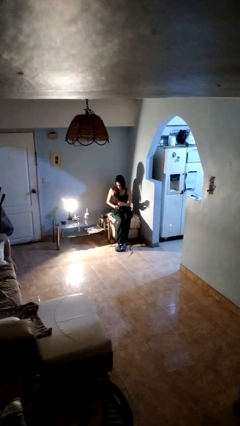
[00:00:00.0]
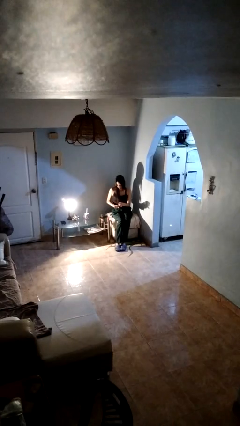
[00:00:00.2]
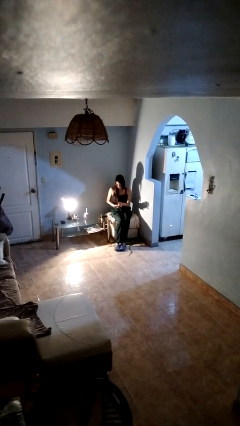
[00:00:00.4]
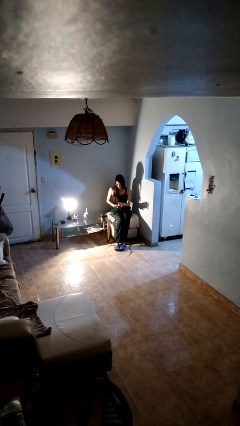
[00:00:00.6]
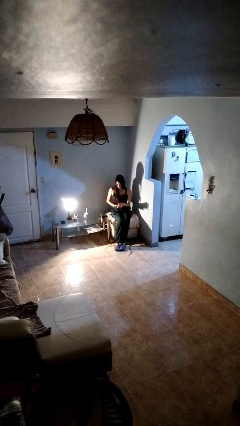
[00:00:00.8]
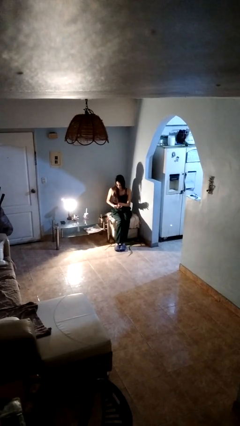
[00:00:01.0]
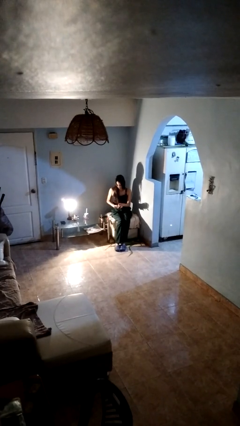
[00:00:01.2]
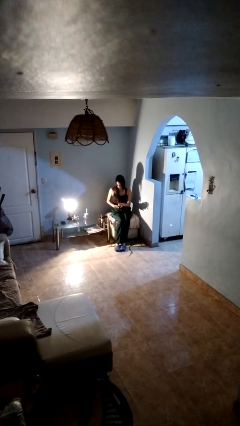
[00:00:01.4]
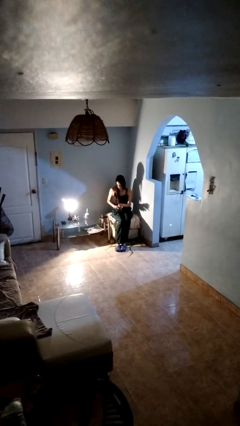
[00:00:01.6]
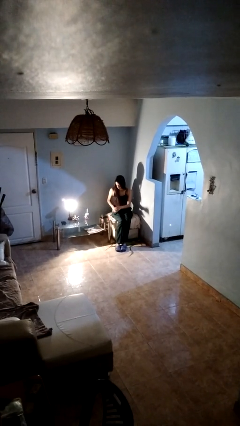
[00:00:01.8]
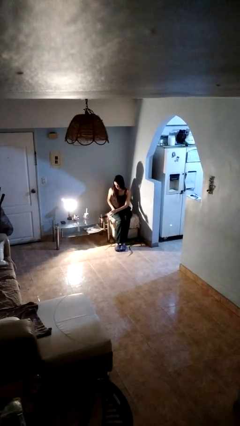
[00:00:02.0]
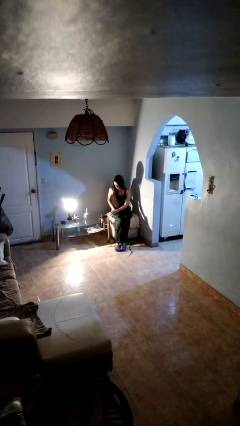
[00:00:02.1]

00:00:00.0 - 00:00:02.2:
person paints fingernails

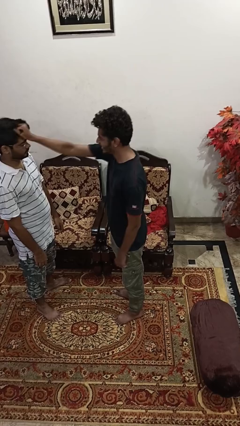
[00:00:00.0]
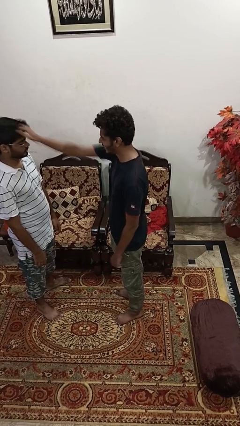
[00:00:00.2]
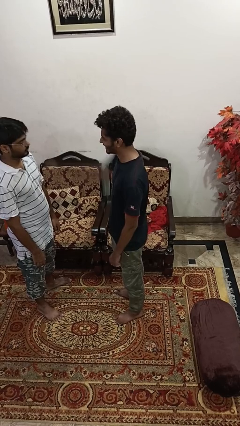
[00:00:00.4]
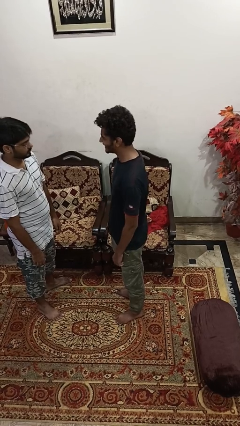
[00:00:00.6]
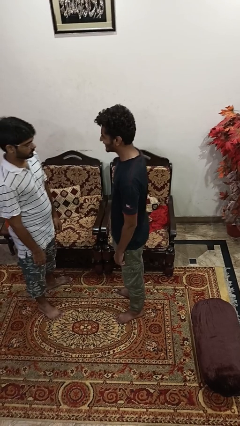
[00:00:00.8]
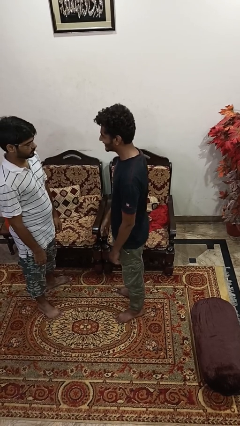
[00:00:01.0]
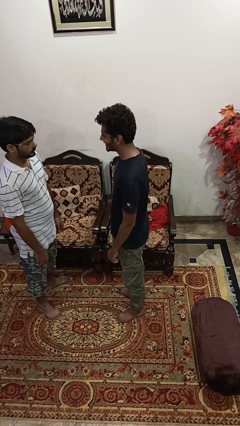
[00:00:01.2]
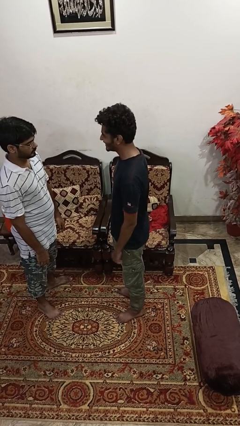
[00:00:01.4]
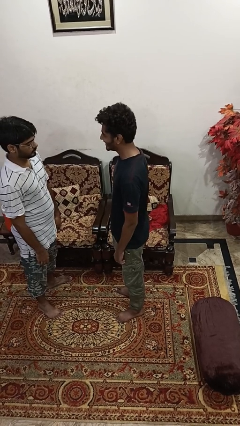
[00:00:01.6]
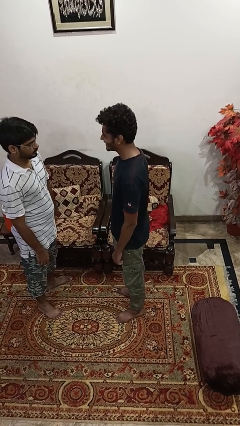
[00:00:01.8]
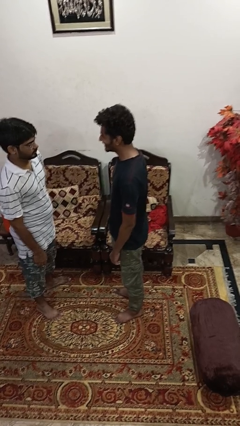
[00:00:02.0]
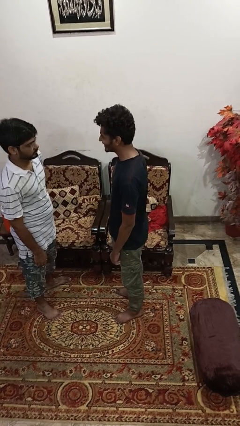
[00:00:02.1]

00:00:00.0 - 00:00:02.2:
person grabs person by shoulder

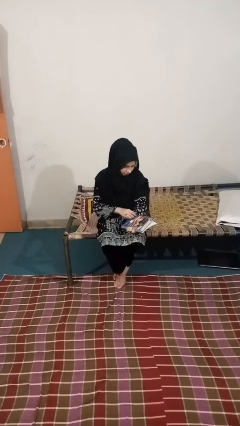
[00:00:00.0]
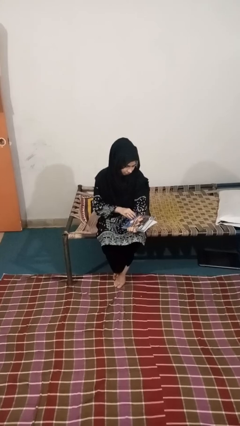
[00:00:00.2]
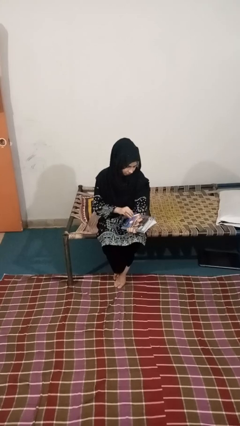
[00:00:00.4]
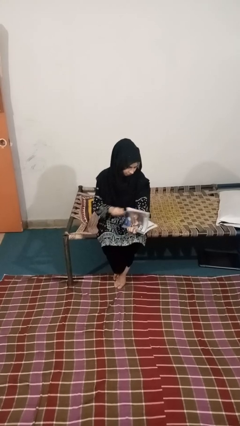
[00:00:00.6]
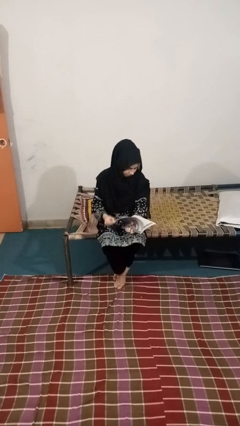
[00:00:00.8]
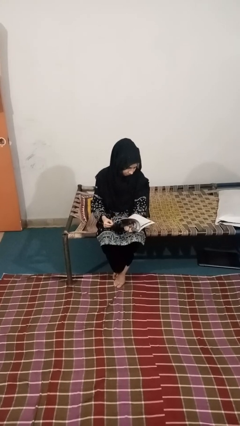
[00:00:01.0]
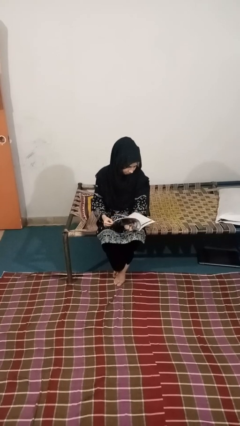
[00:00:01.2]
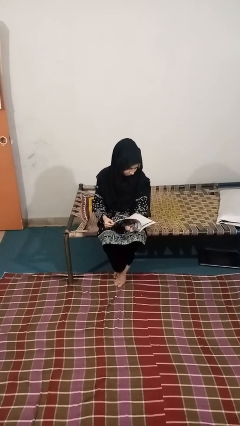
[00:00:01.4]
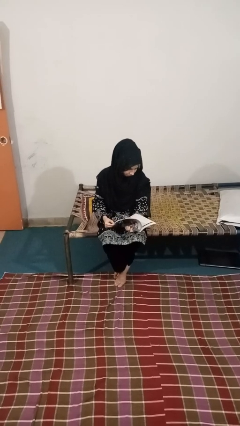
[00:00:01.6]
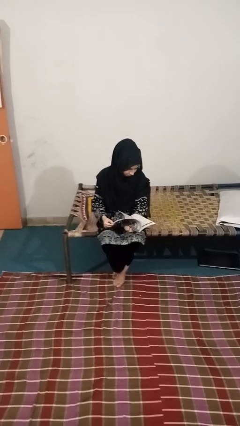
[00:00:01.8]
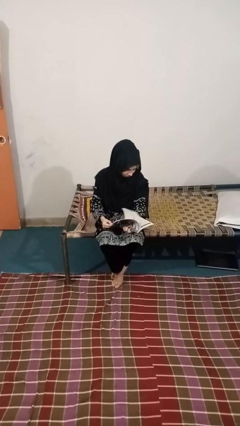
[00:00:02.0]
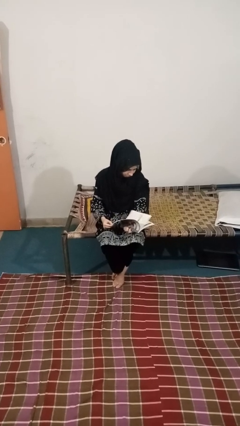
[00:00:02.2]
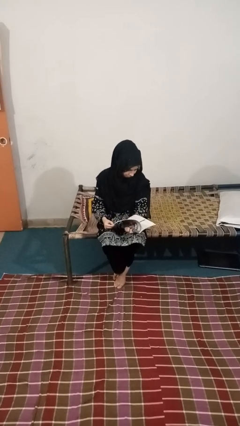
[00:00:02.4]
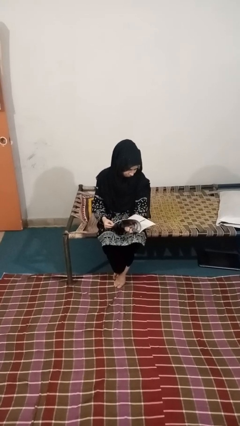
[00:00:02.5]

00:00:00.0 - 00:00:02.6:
person reads book

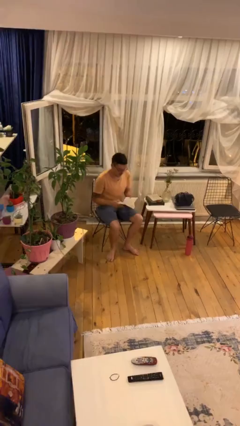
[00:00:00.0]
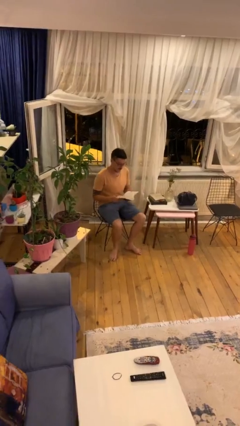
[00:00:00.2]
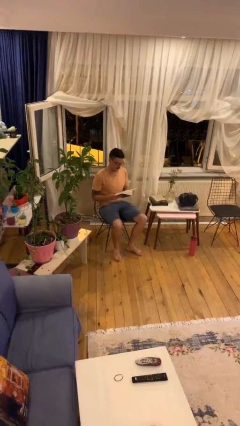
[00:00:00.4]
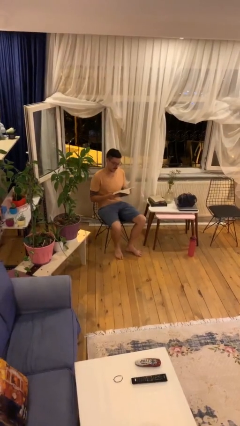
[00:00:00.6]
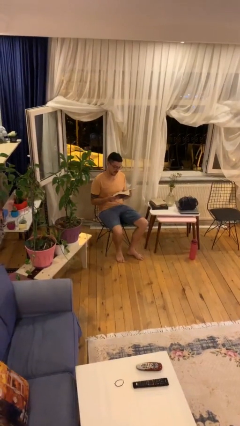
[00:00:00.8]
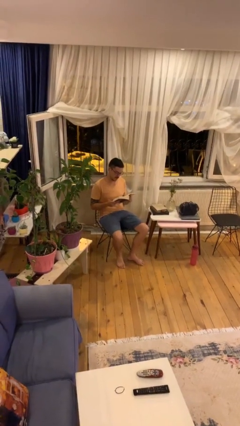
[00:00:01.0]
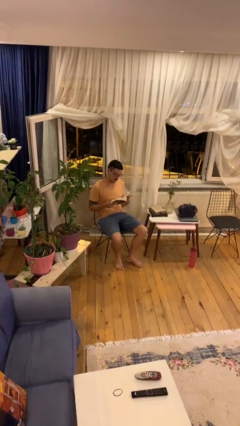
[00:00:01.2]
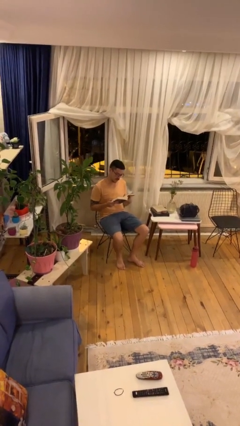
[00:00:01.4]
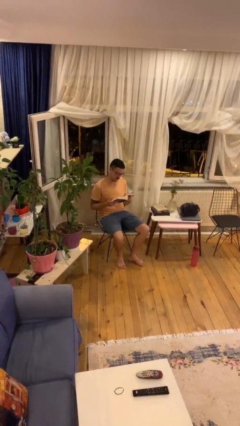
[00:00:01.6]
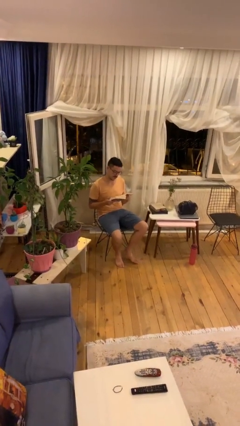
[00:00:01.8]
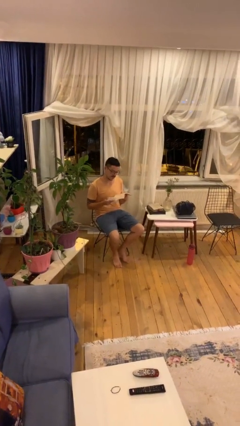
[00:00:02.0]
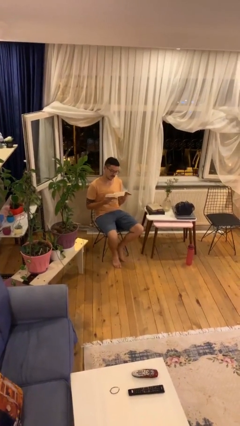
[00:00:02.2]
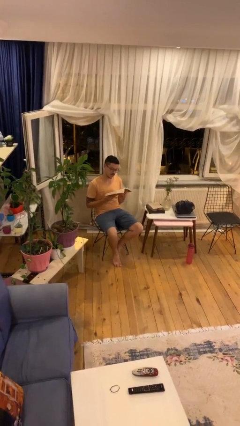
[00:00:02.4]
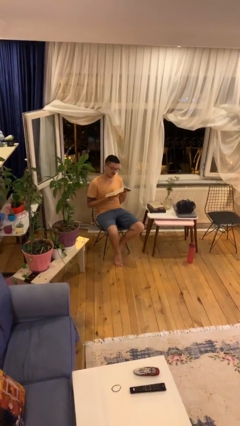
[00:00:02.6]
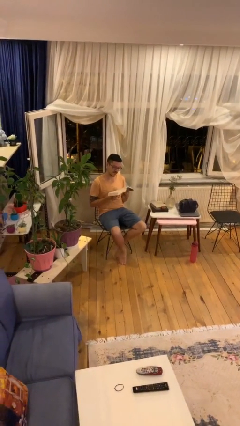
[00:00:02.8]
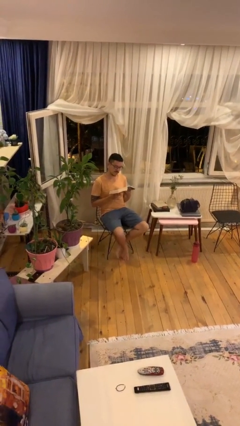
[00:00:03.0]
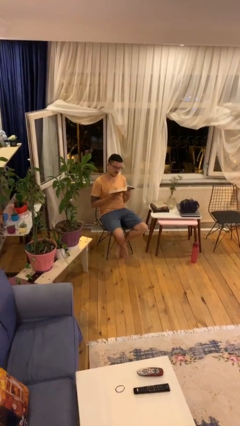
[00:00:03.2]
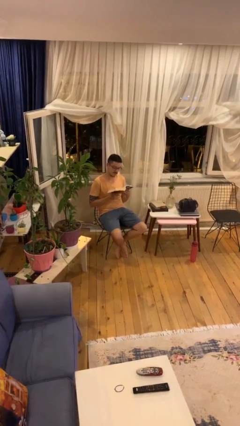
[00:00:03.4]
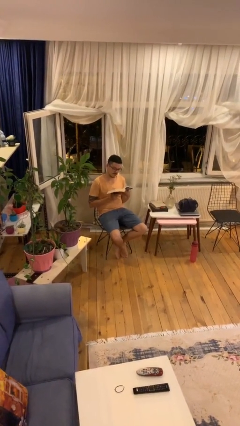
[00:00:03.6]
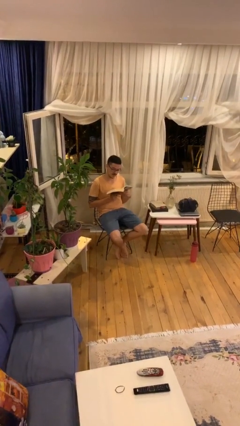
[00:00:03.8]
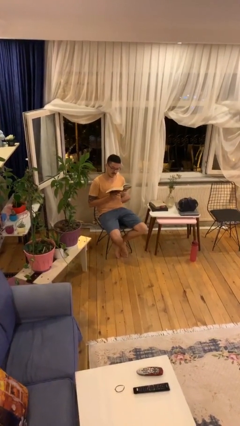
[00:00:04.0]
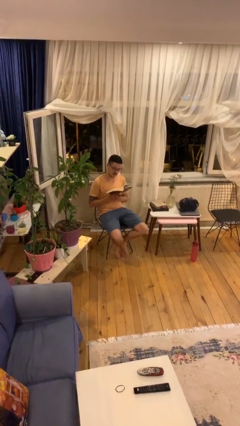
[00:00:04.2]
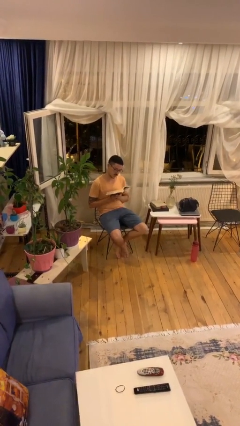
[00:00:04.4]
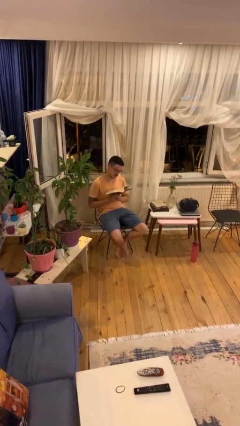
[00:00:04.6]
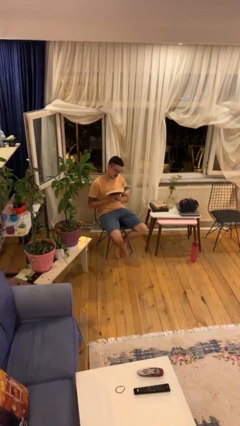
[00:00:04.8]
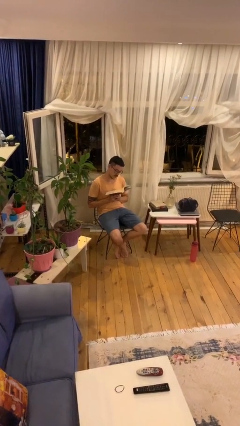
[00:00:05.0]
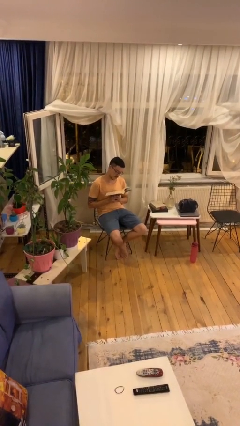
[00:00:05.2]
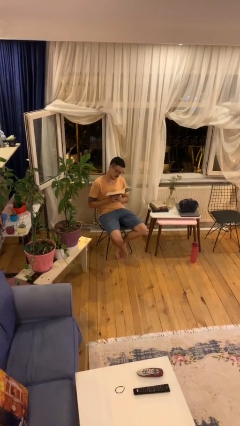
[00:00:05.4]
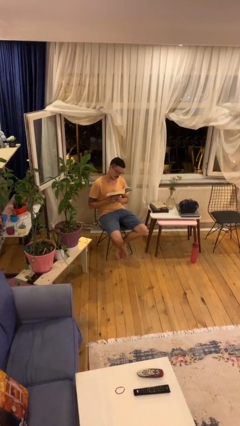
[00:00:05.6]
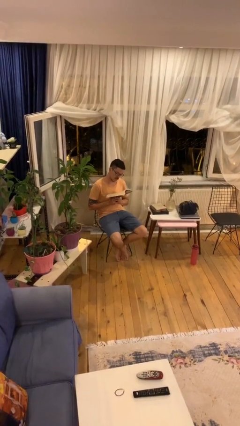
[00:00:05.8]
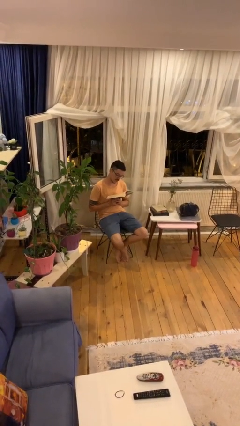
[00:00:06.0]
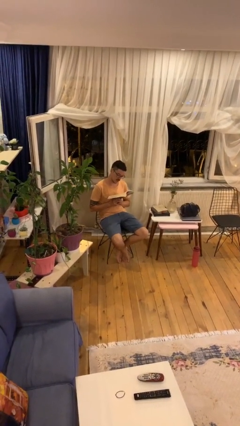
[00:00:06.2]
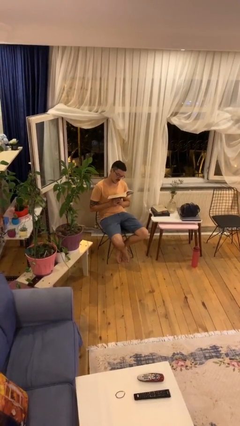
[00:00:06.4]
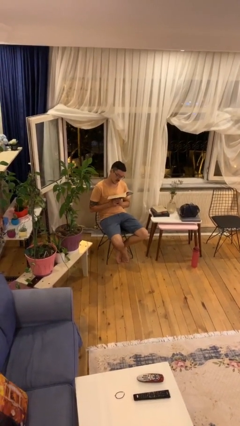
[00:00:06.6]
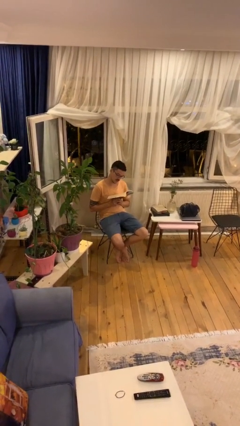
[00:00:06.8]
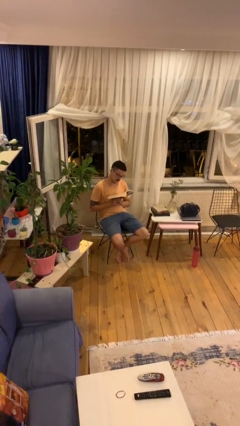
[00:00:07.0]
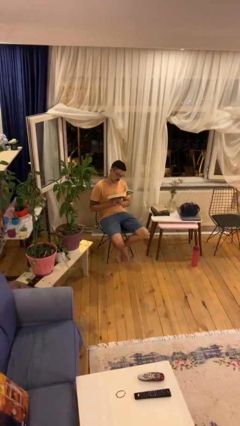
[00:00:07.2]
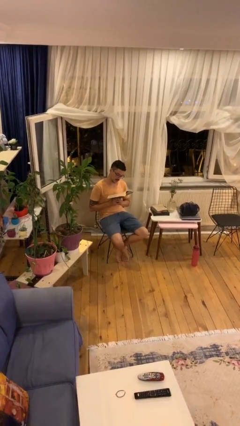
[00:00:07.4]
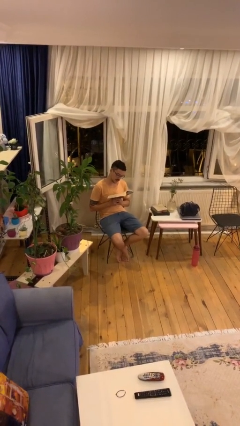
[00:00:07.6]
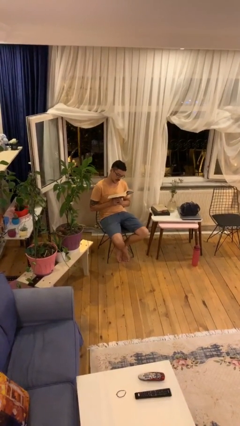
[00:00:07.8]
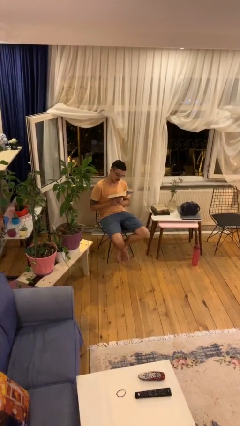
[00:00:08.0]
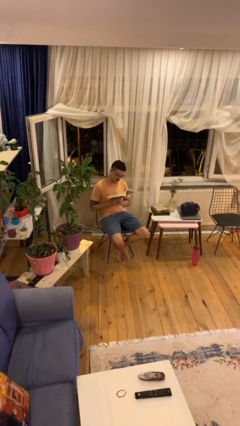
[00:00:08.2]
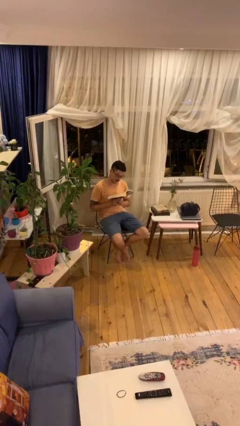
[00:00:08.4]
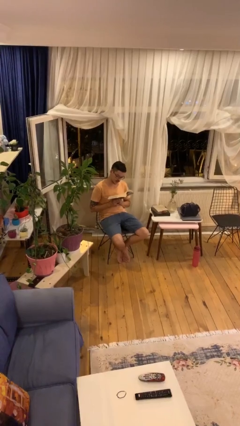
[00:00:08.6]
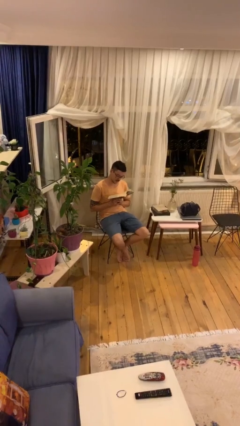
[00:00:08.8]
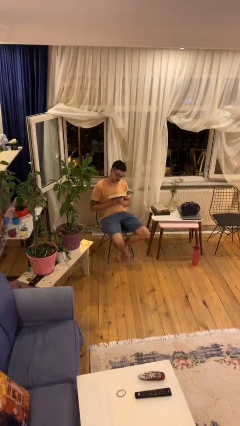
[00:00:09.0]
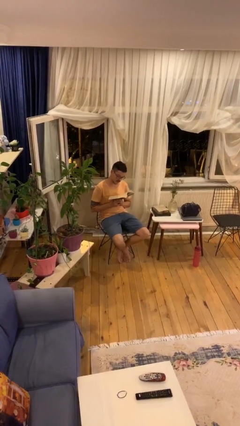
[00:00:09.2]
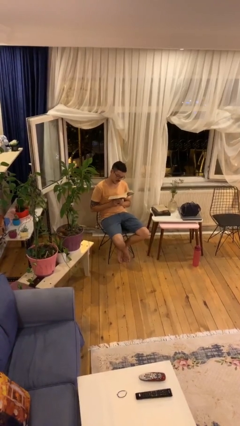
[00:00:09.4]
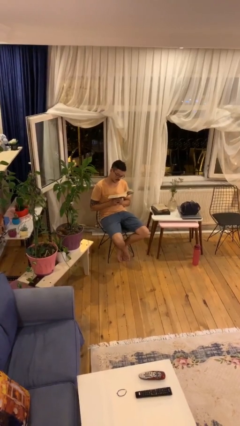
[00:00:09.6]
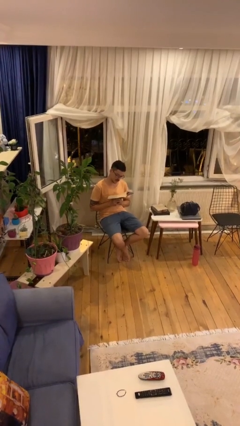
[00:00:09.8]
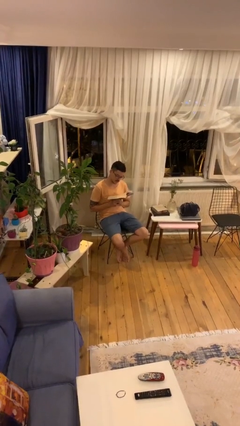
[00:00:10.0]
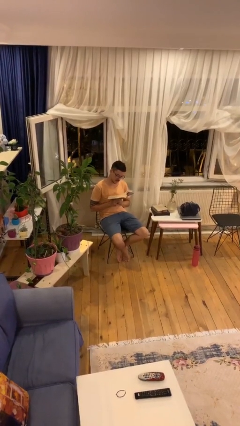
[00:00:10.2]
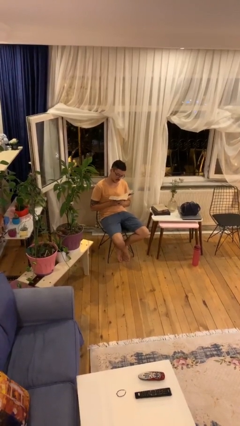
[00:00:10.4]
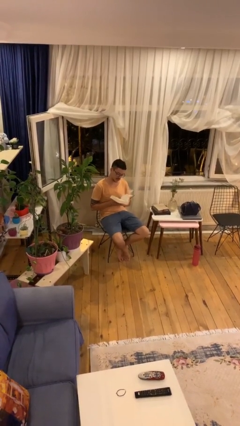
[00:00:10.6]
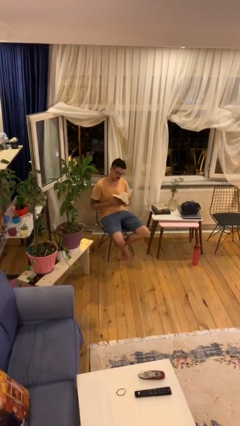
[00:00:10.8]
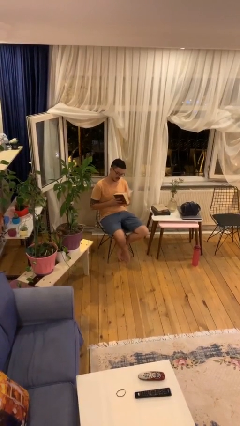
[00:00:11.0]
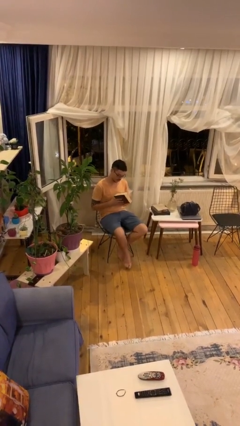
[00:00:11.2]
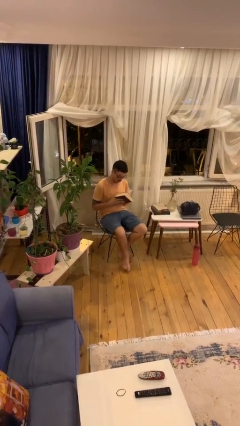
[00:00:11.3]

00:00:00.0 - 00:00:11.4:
person reads document
